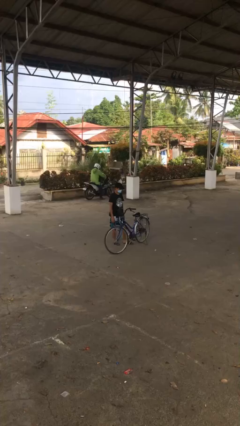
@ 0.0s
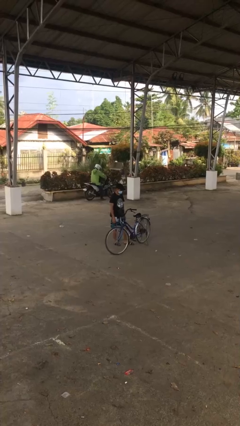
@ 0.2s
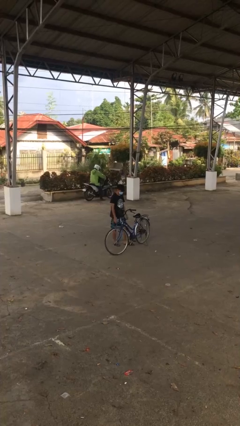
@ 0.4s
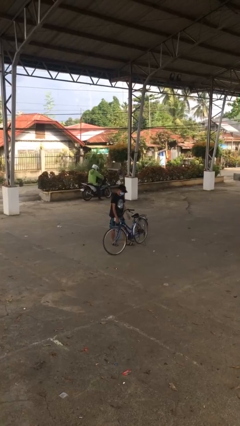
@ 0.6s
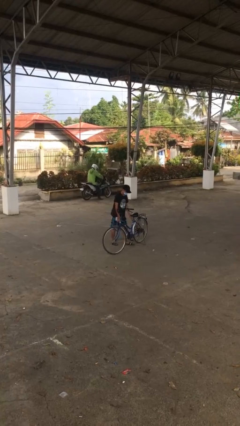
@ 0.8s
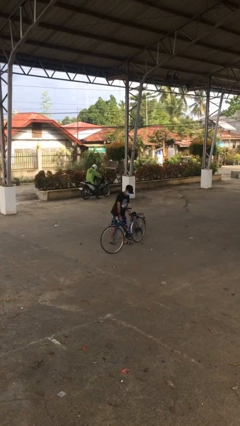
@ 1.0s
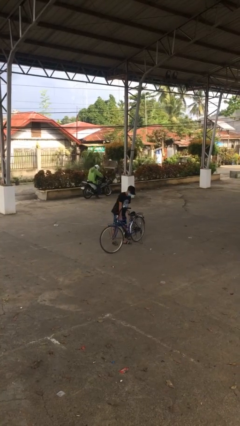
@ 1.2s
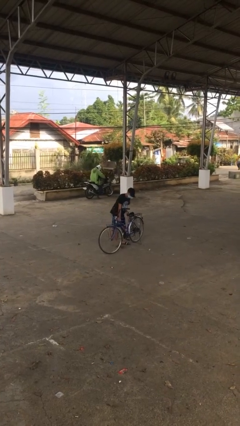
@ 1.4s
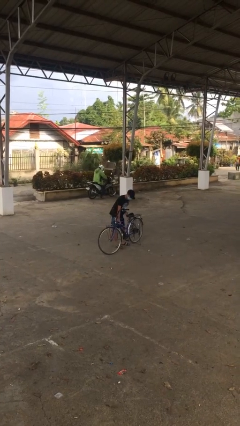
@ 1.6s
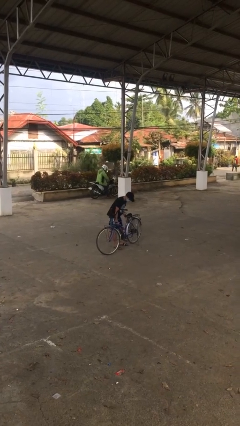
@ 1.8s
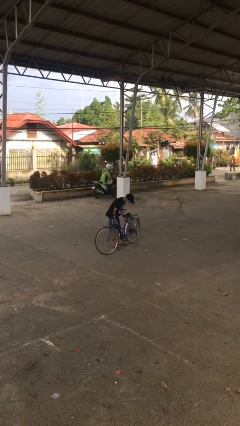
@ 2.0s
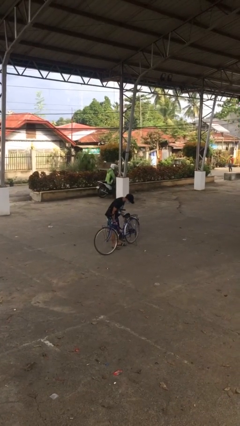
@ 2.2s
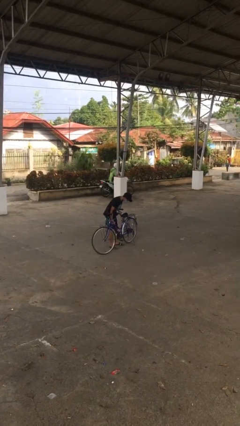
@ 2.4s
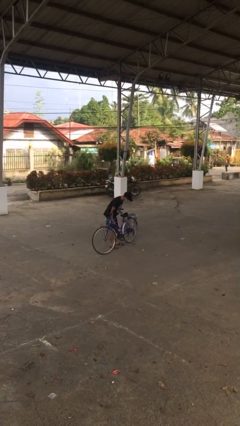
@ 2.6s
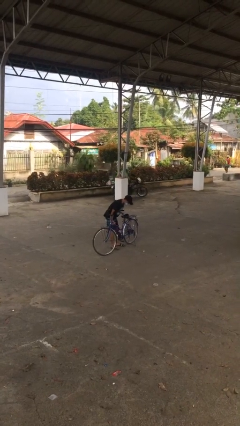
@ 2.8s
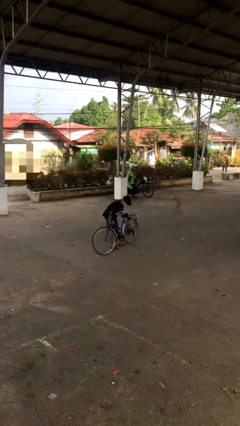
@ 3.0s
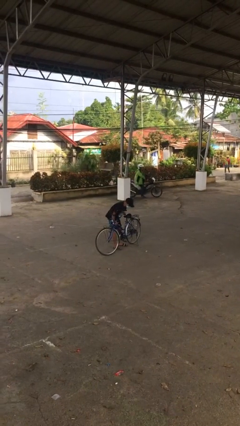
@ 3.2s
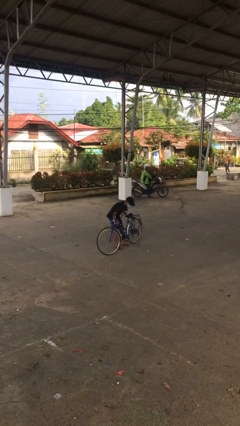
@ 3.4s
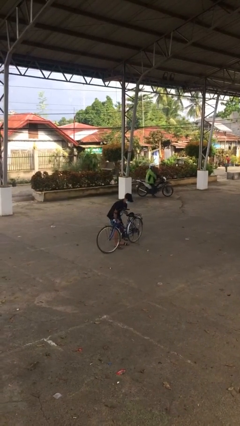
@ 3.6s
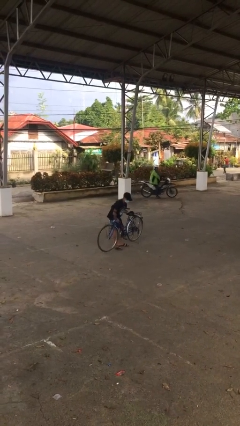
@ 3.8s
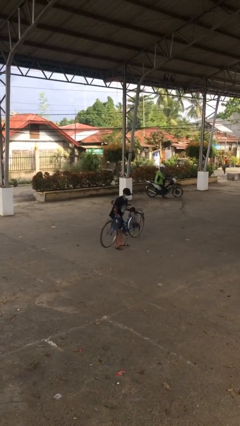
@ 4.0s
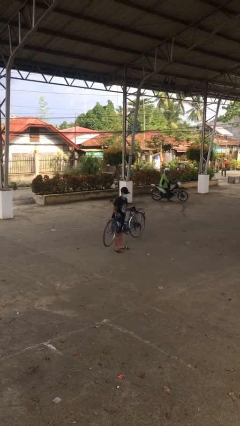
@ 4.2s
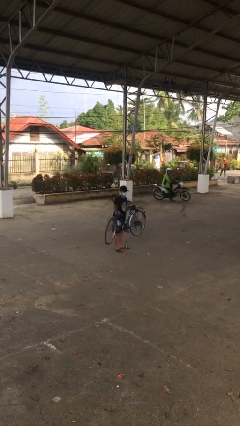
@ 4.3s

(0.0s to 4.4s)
person picks up object from floor

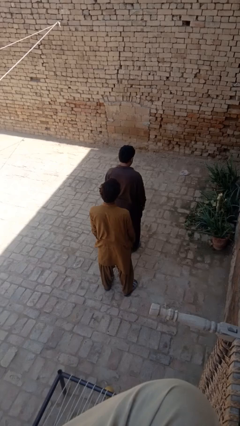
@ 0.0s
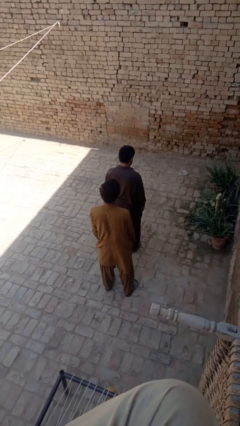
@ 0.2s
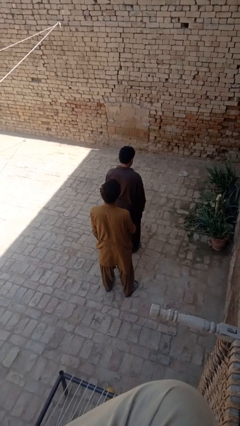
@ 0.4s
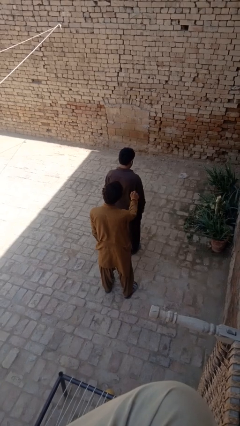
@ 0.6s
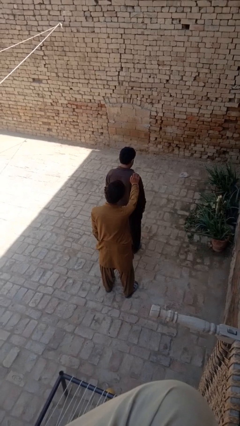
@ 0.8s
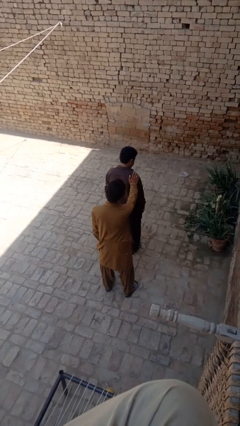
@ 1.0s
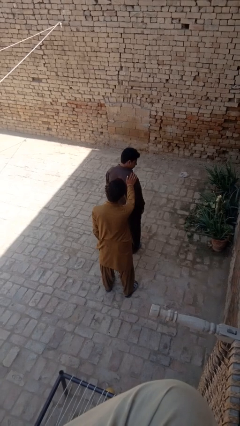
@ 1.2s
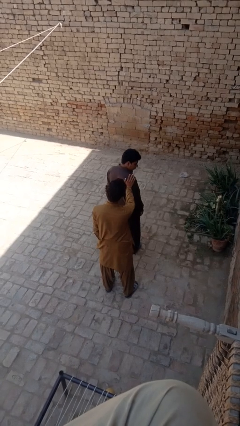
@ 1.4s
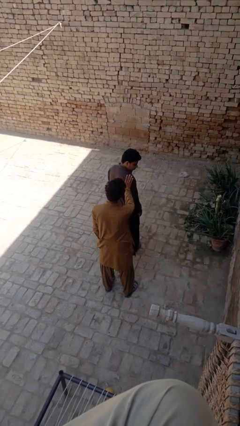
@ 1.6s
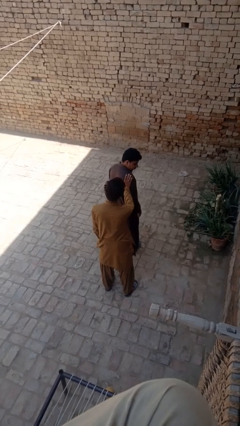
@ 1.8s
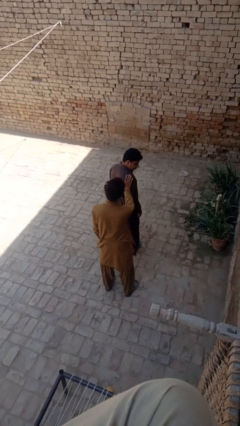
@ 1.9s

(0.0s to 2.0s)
person looks over shoulder

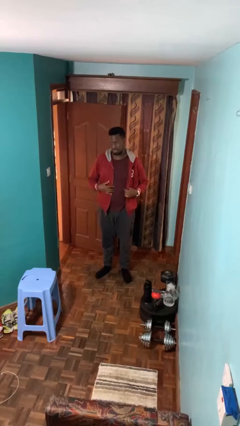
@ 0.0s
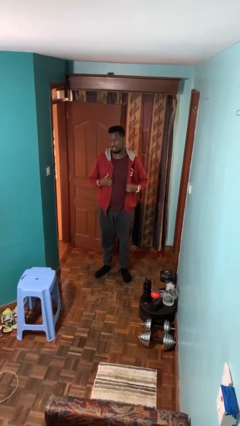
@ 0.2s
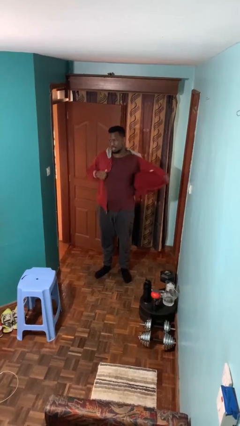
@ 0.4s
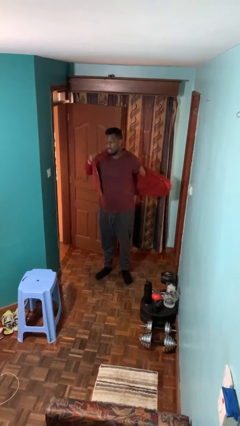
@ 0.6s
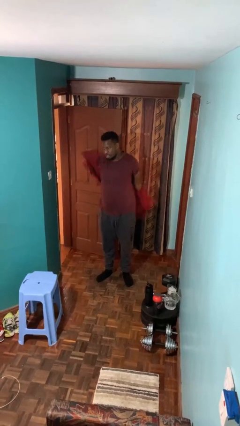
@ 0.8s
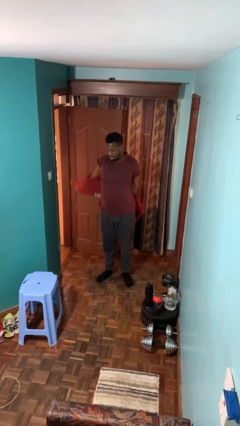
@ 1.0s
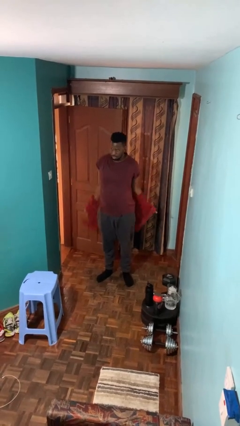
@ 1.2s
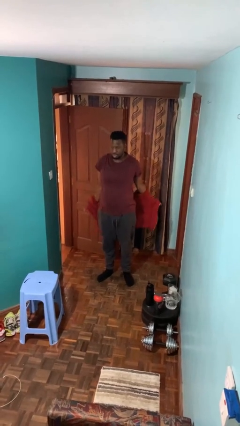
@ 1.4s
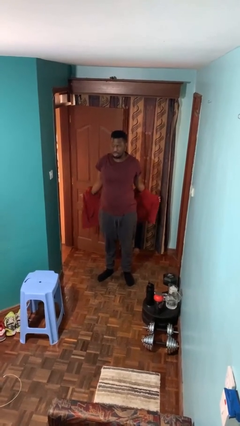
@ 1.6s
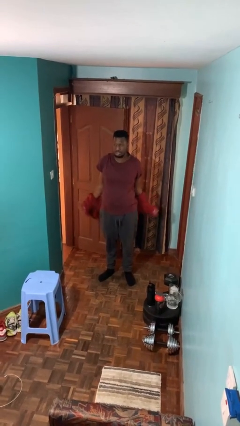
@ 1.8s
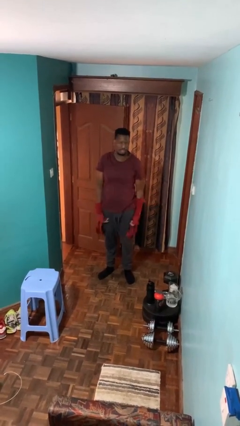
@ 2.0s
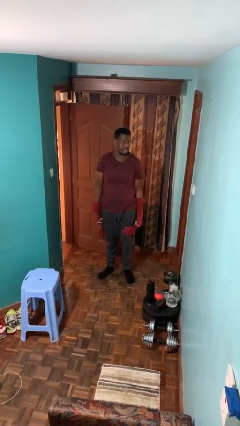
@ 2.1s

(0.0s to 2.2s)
person takes off jacket

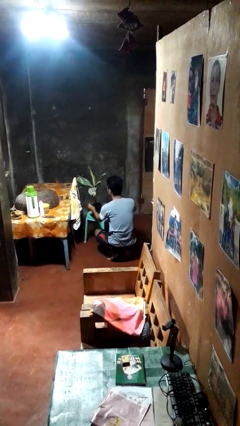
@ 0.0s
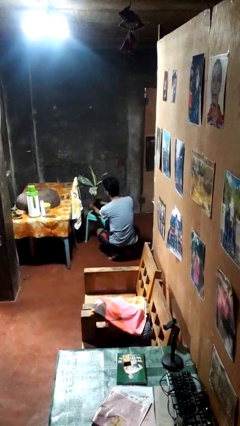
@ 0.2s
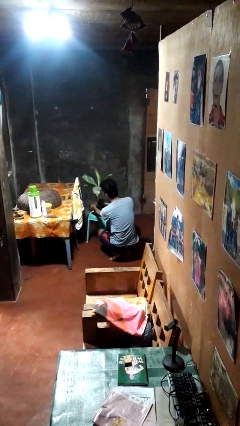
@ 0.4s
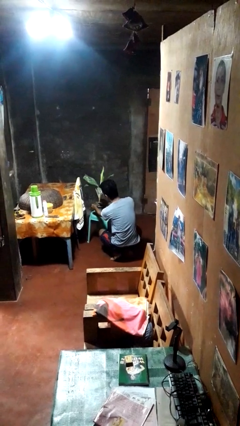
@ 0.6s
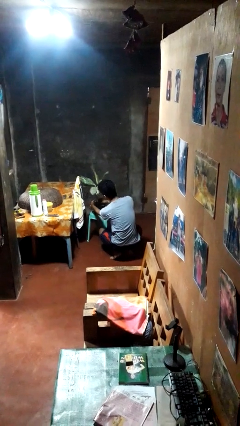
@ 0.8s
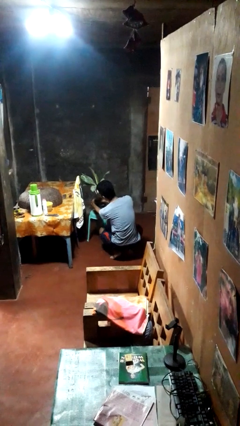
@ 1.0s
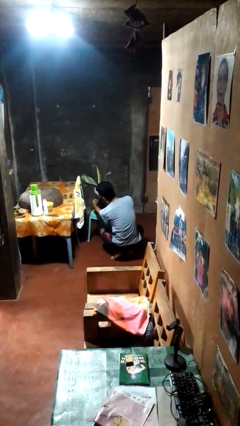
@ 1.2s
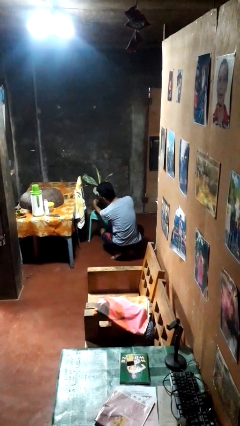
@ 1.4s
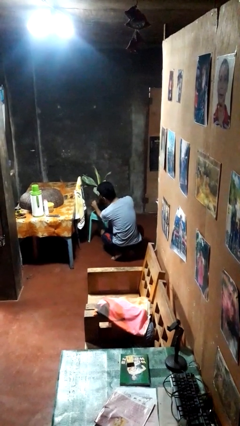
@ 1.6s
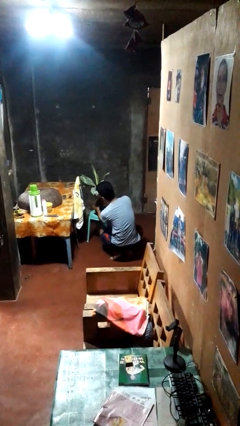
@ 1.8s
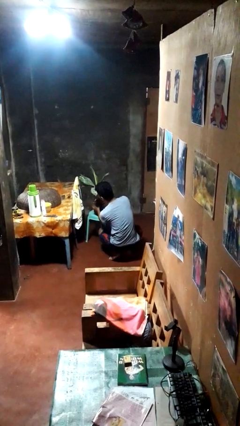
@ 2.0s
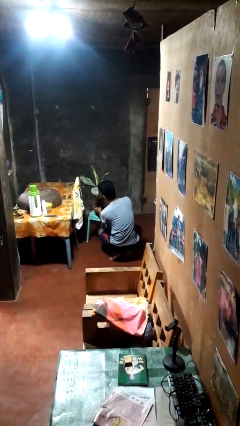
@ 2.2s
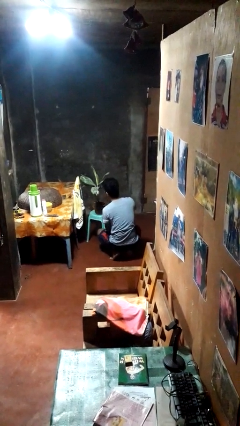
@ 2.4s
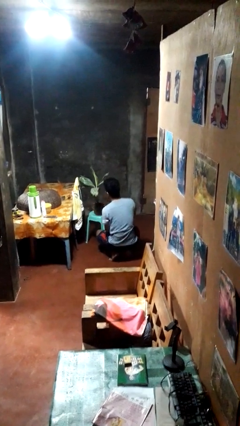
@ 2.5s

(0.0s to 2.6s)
person arranges flowers in vase

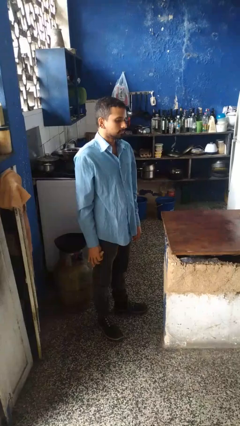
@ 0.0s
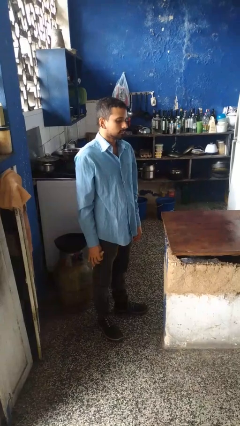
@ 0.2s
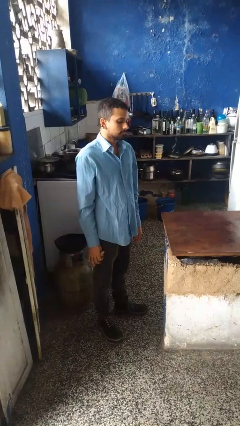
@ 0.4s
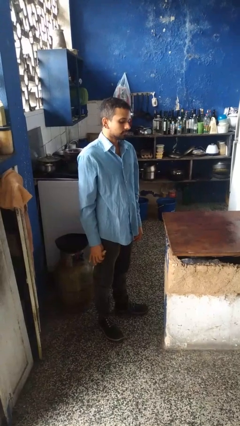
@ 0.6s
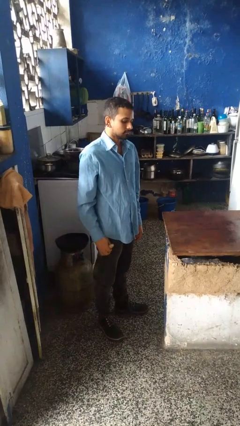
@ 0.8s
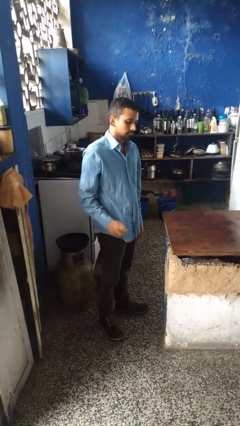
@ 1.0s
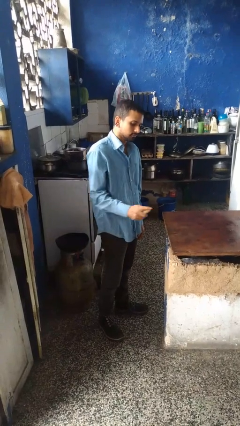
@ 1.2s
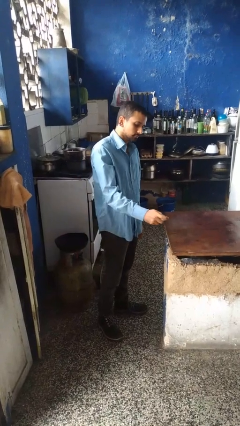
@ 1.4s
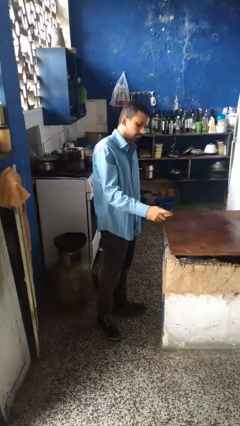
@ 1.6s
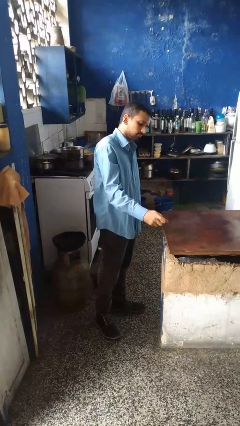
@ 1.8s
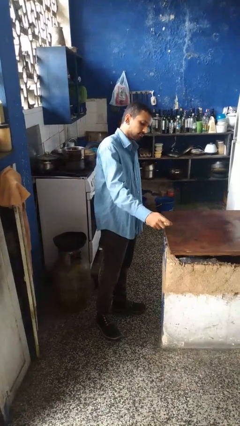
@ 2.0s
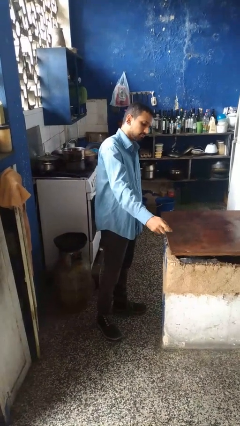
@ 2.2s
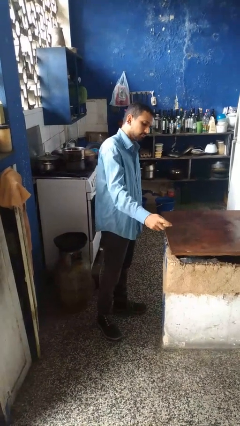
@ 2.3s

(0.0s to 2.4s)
person sprays from bottle

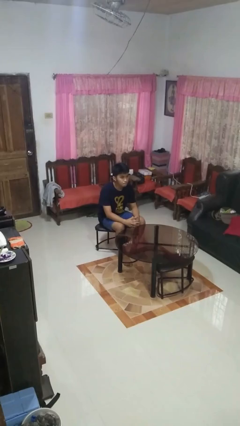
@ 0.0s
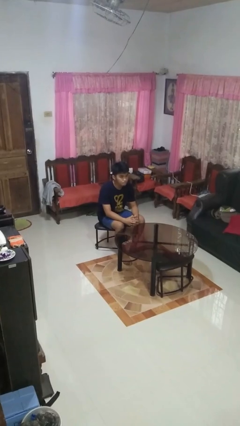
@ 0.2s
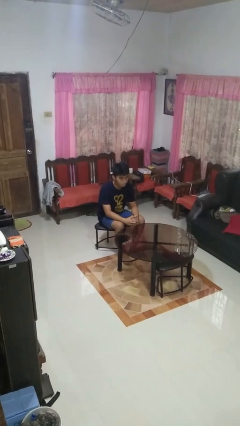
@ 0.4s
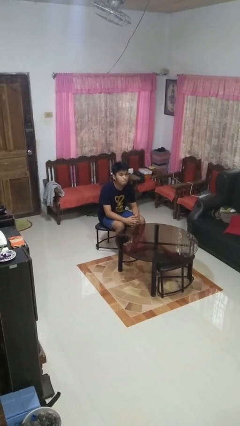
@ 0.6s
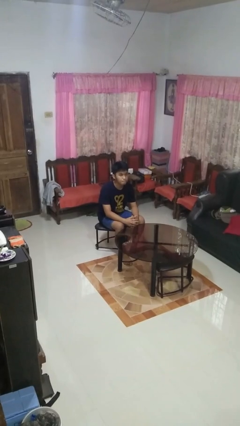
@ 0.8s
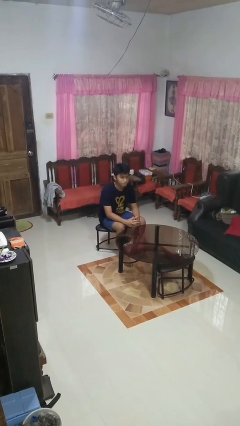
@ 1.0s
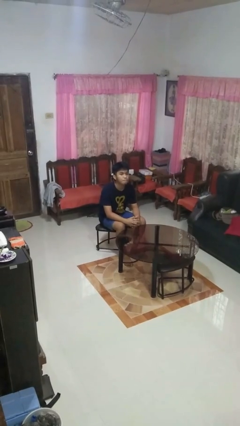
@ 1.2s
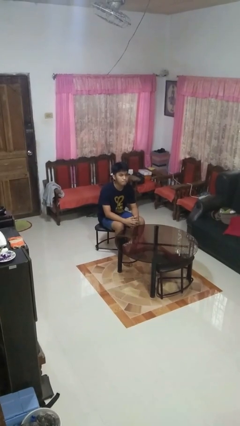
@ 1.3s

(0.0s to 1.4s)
person nods head

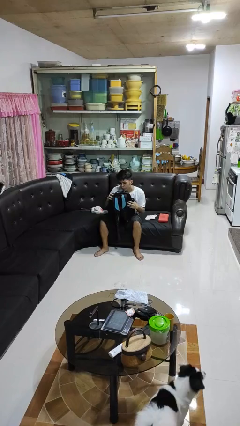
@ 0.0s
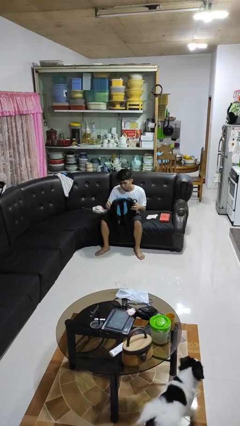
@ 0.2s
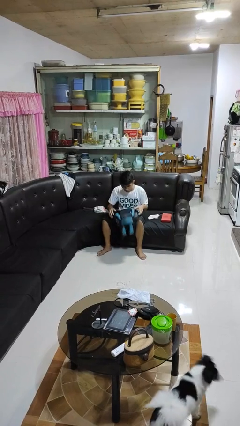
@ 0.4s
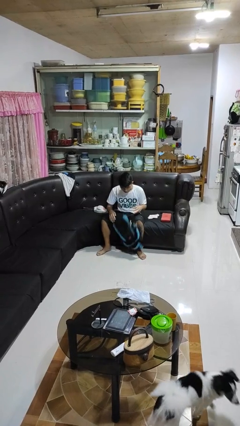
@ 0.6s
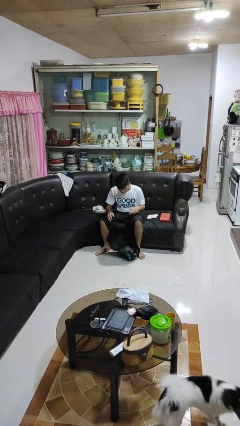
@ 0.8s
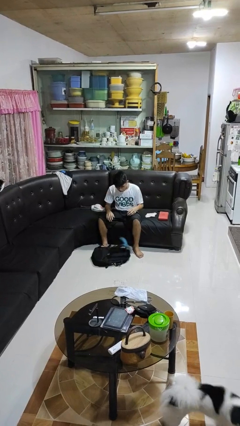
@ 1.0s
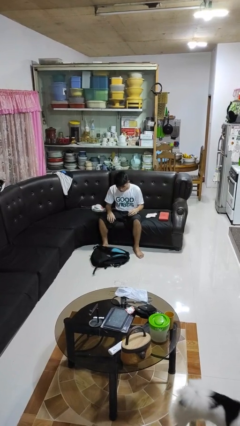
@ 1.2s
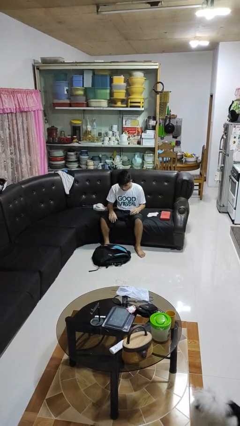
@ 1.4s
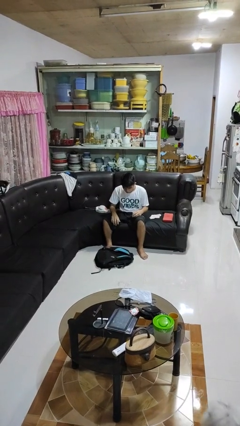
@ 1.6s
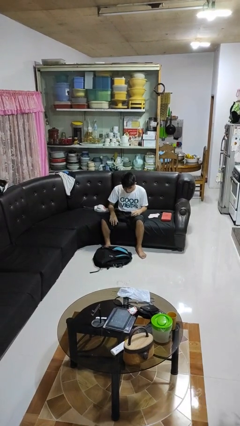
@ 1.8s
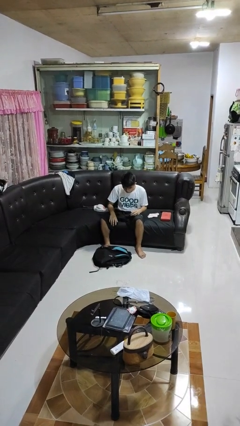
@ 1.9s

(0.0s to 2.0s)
person drops object
